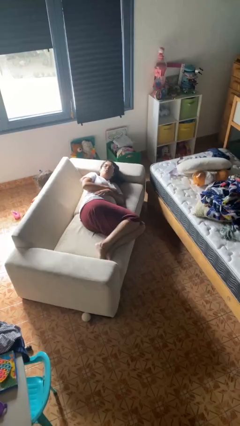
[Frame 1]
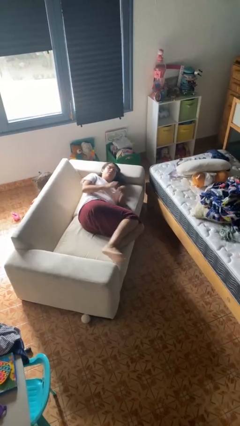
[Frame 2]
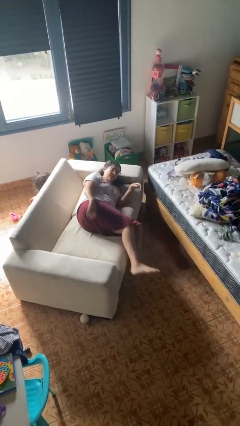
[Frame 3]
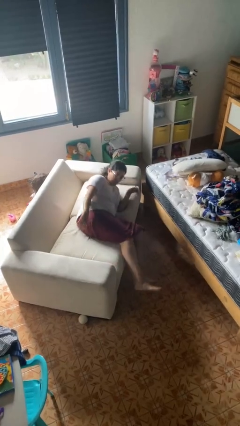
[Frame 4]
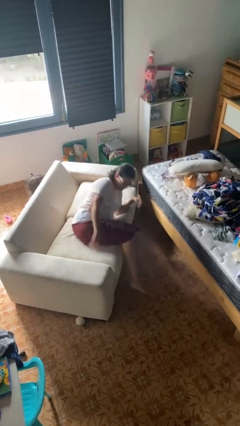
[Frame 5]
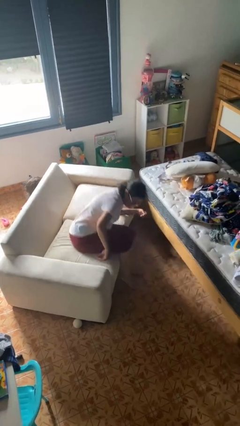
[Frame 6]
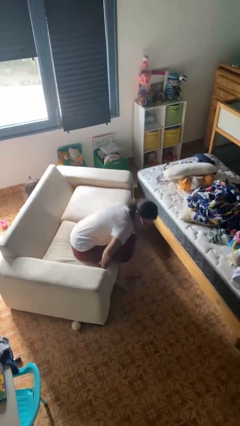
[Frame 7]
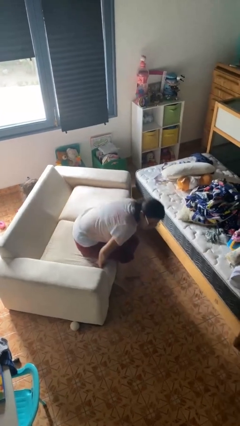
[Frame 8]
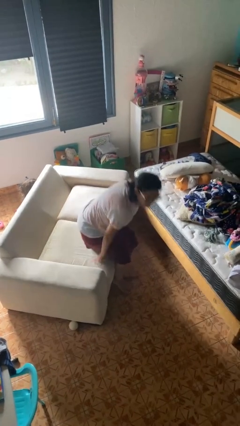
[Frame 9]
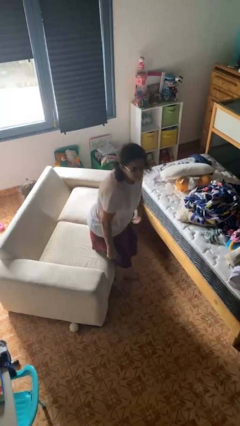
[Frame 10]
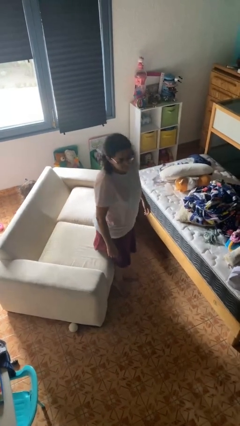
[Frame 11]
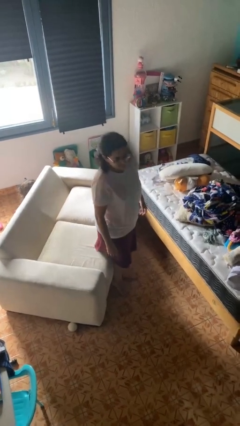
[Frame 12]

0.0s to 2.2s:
person stands up

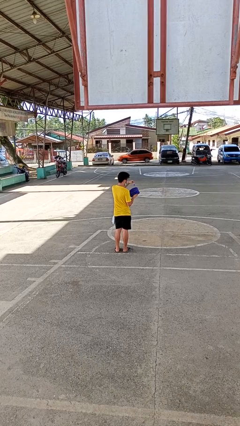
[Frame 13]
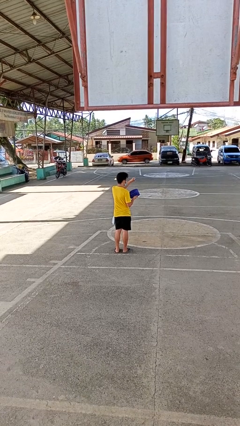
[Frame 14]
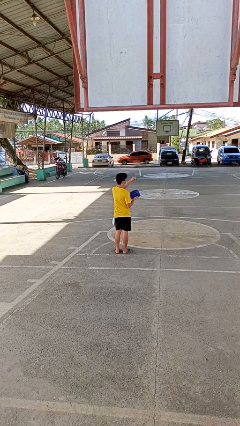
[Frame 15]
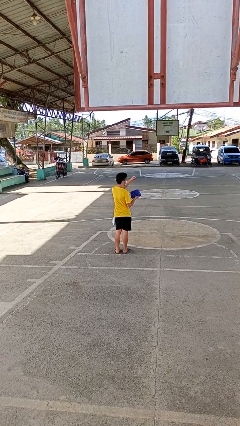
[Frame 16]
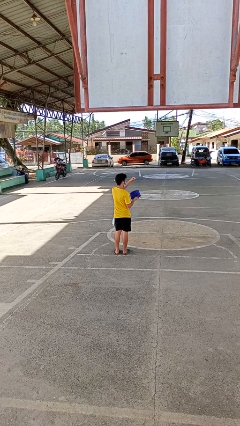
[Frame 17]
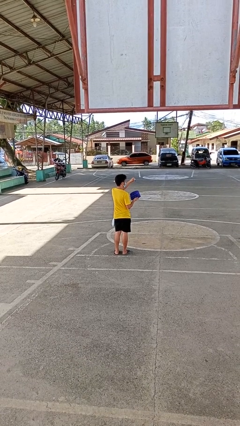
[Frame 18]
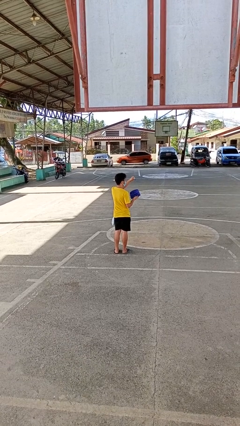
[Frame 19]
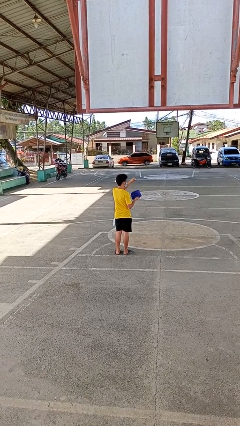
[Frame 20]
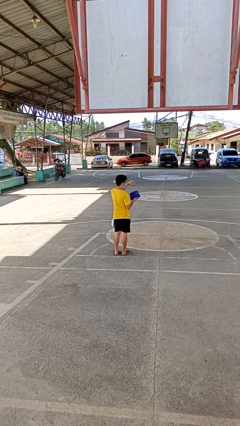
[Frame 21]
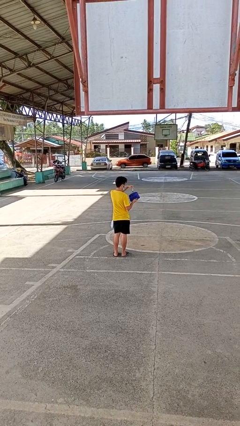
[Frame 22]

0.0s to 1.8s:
person takes object from purse

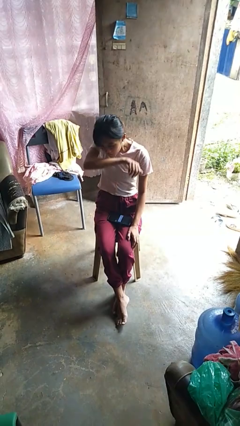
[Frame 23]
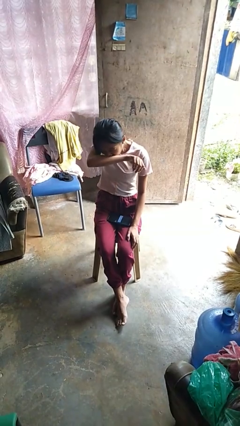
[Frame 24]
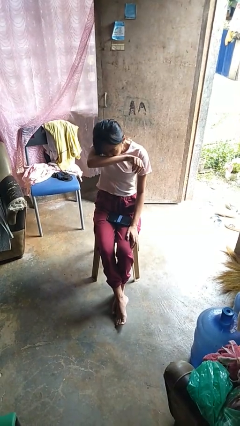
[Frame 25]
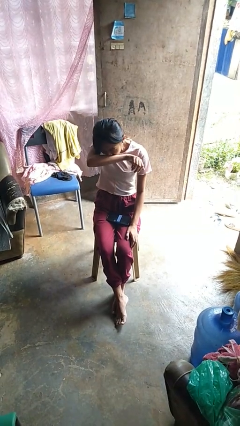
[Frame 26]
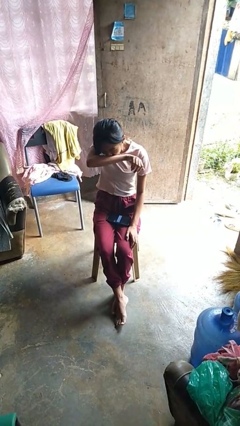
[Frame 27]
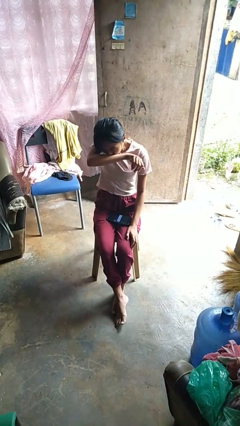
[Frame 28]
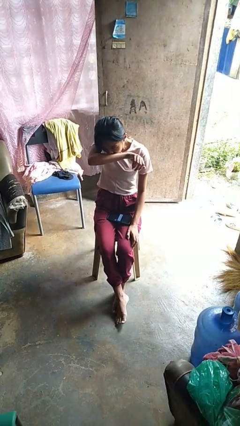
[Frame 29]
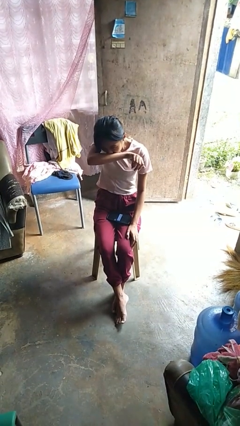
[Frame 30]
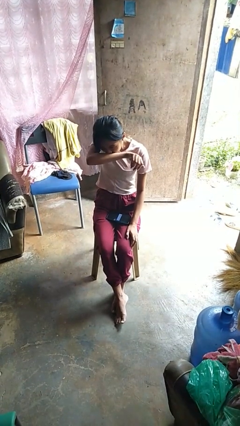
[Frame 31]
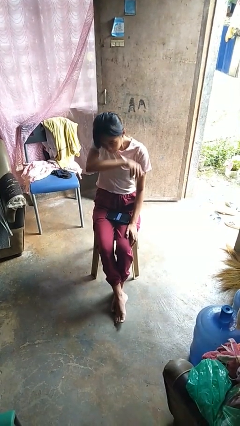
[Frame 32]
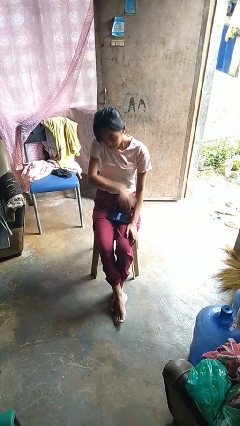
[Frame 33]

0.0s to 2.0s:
person sneezes into arm

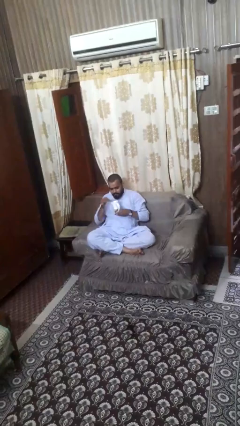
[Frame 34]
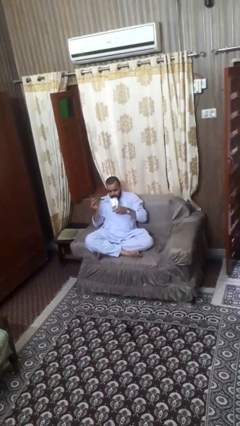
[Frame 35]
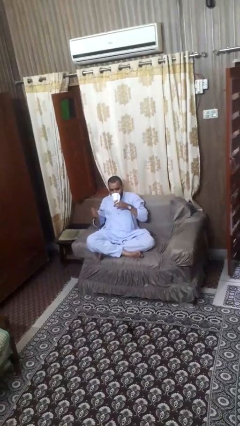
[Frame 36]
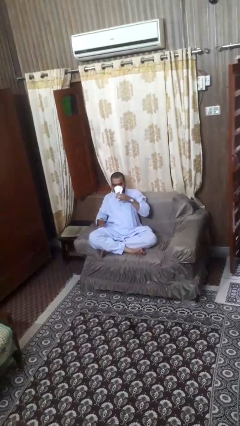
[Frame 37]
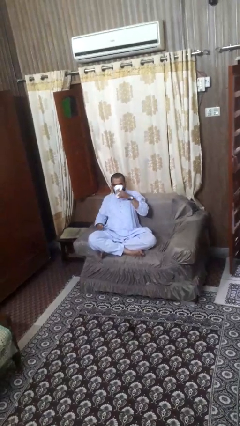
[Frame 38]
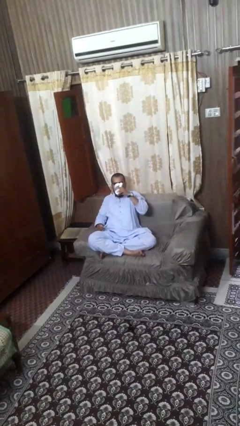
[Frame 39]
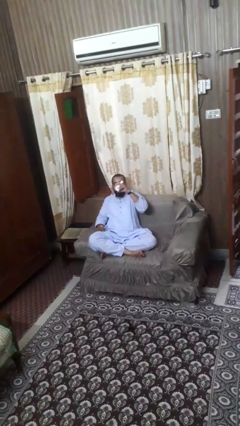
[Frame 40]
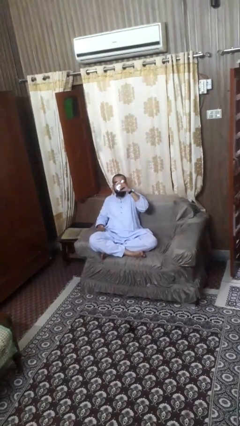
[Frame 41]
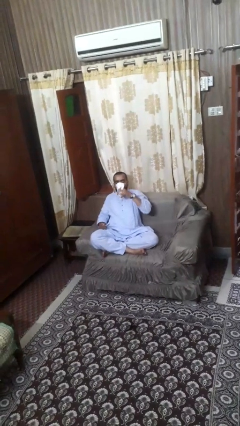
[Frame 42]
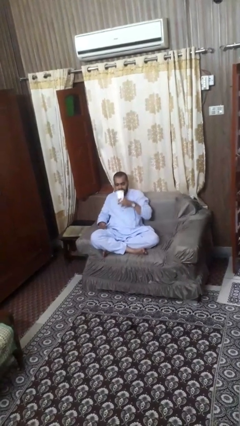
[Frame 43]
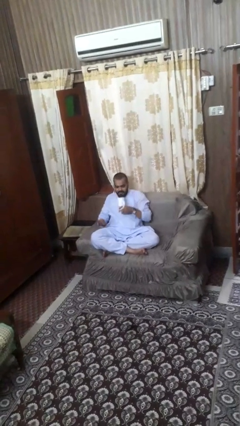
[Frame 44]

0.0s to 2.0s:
person drinks from mug

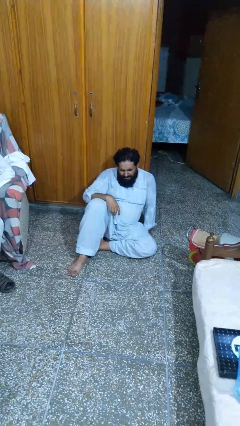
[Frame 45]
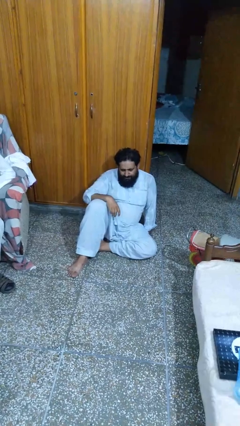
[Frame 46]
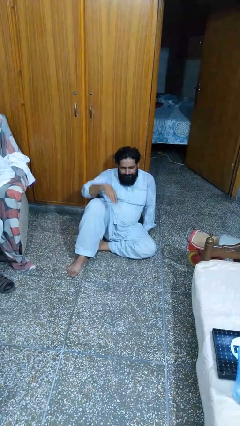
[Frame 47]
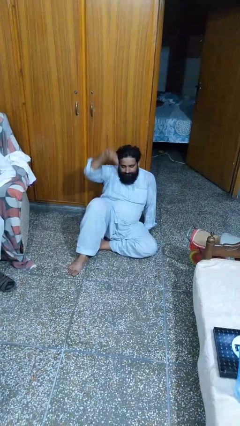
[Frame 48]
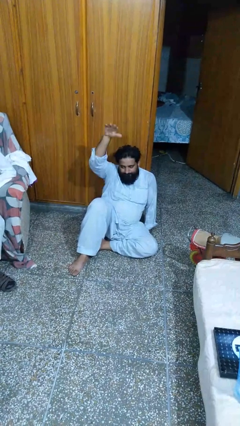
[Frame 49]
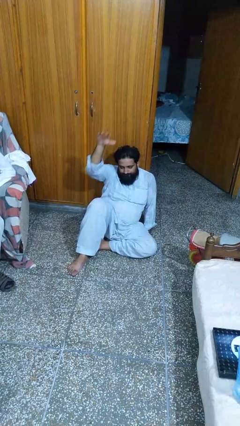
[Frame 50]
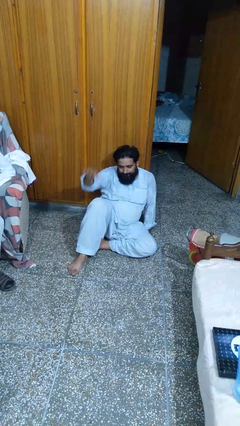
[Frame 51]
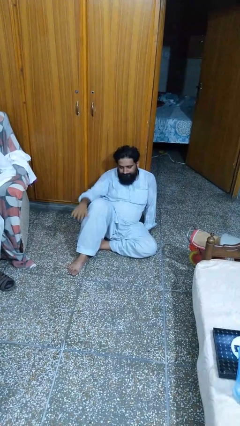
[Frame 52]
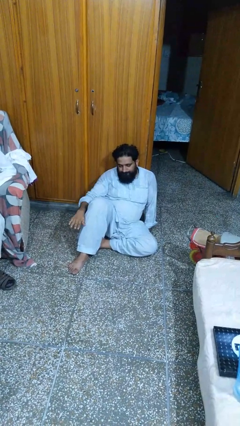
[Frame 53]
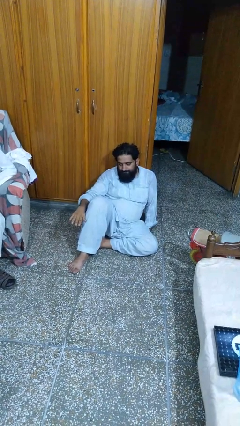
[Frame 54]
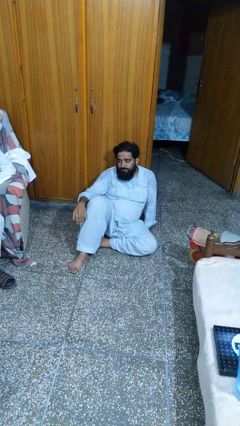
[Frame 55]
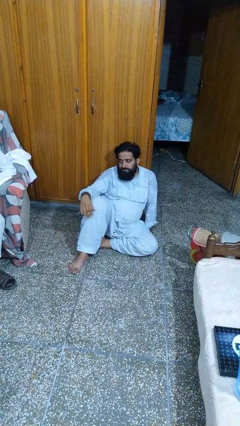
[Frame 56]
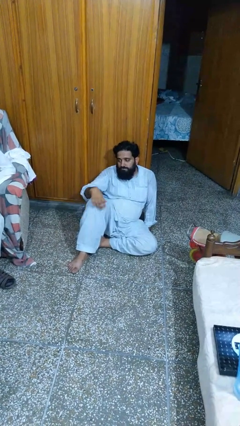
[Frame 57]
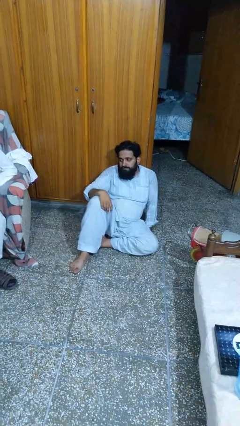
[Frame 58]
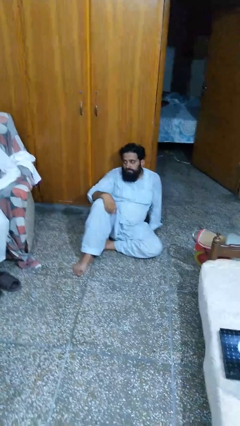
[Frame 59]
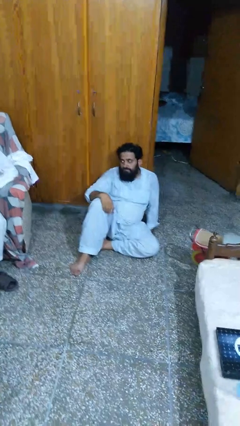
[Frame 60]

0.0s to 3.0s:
person gestures swipe down

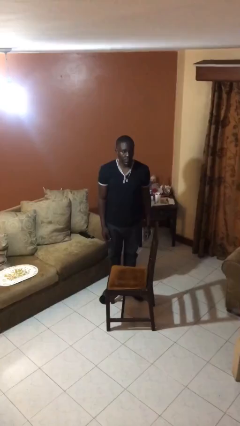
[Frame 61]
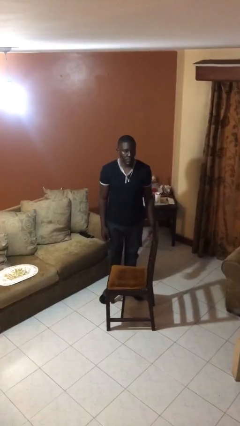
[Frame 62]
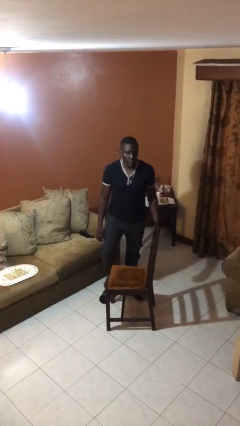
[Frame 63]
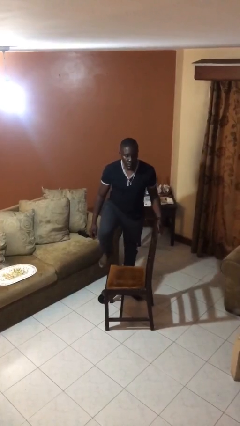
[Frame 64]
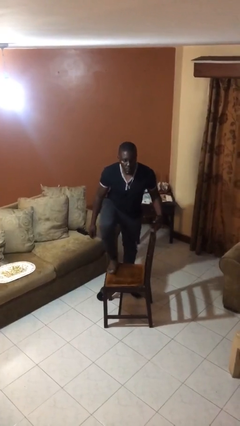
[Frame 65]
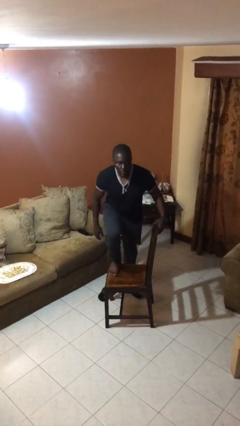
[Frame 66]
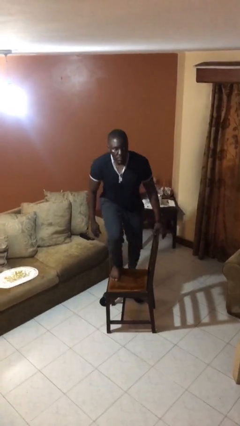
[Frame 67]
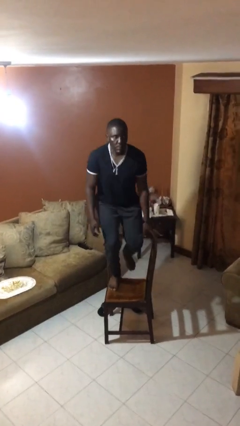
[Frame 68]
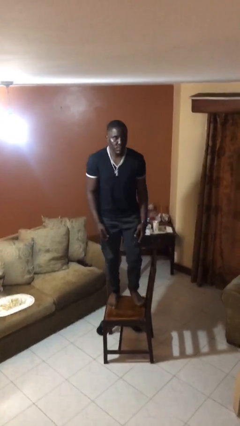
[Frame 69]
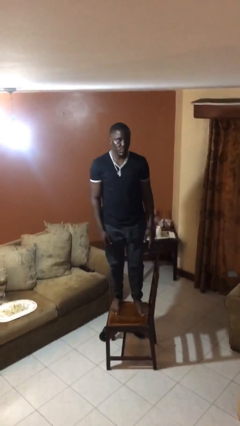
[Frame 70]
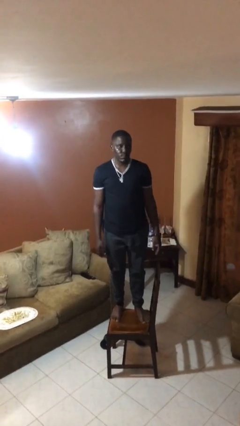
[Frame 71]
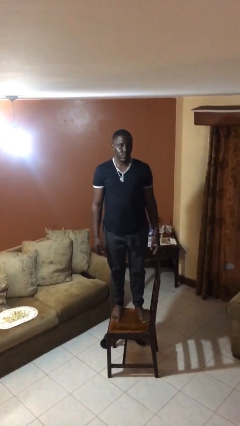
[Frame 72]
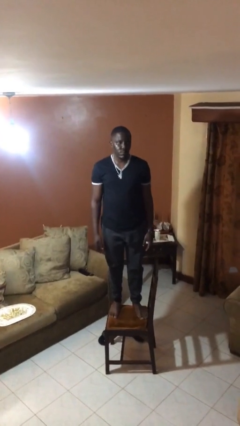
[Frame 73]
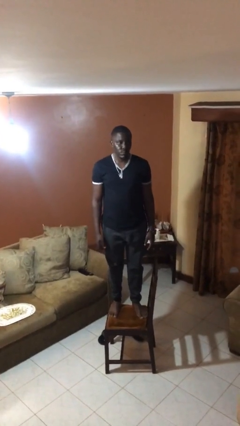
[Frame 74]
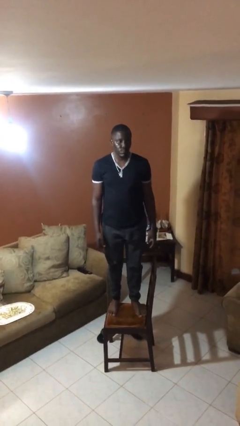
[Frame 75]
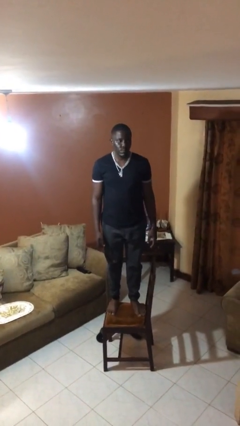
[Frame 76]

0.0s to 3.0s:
person climbs on chair

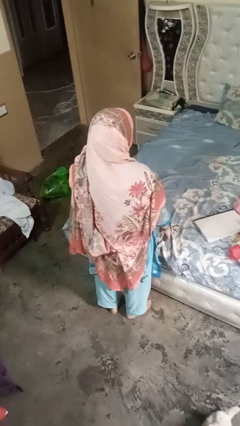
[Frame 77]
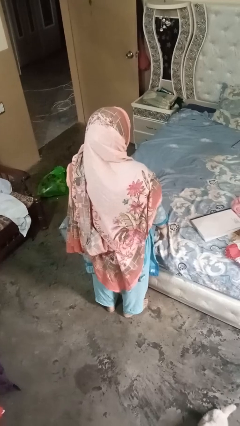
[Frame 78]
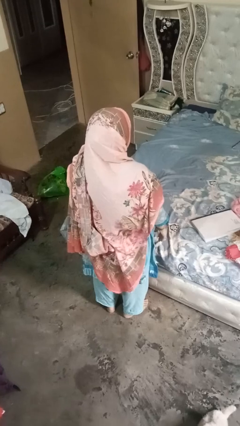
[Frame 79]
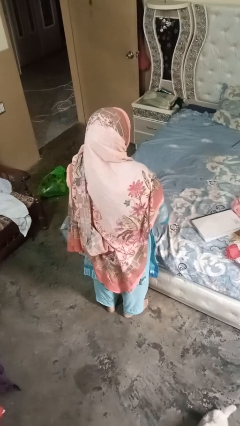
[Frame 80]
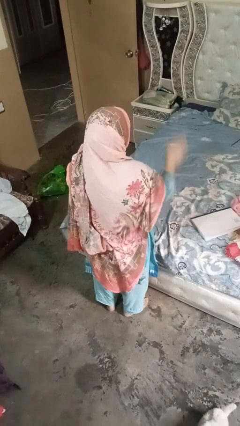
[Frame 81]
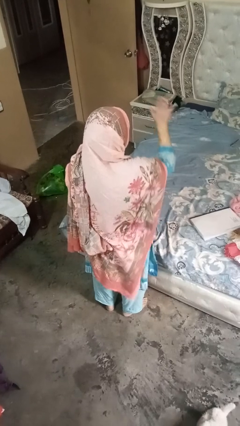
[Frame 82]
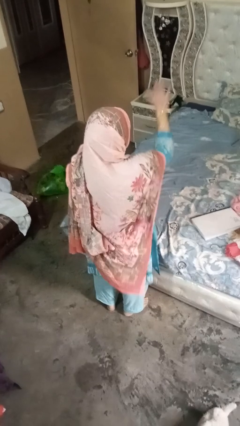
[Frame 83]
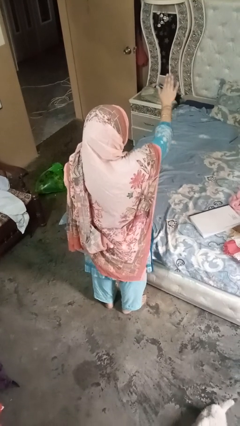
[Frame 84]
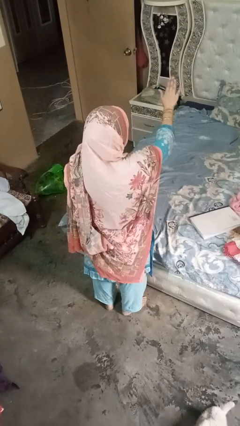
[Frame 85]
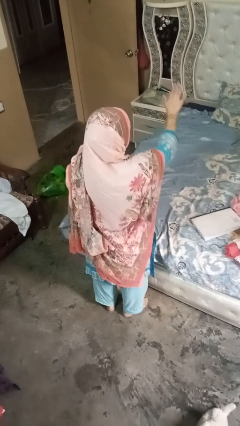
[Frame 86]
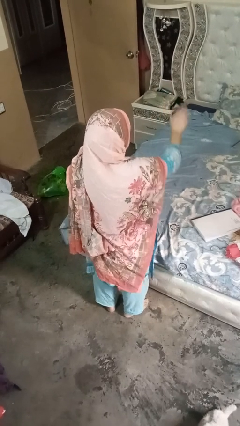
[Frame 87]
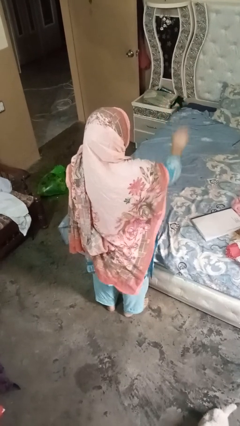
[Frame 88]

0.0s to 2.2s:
person gestures stop

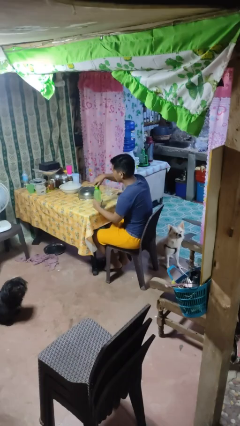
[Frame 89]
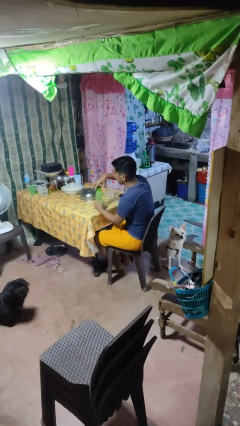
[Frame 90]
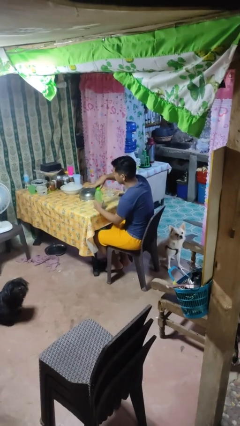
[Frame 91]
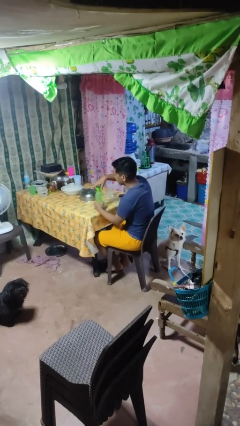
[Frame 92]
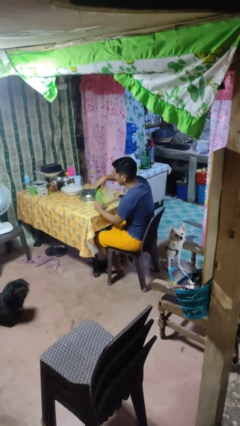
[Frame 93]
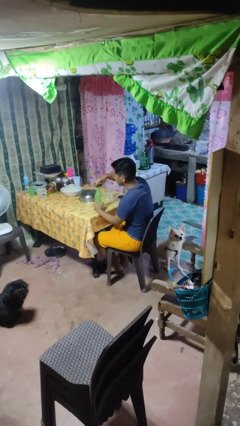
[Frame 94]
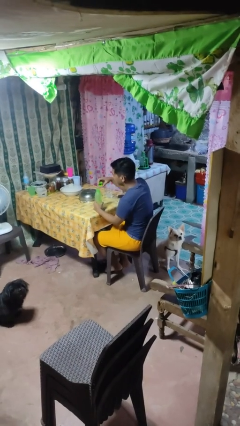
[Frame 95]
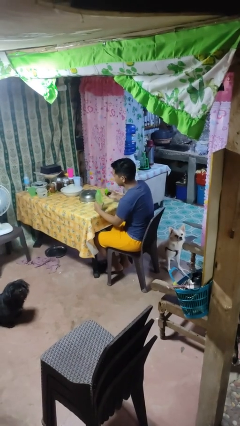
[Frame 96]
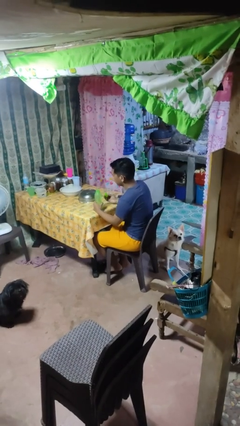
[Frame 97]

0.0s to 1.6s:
person unscrews lid from bottle
